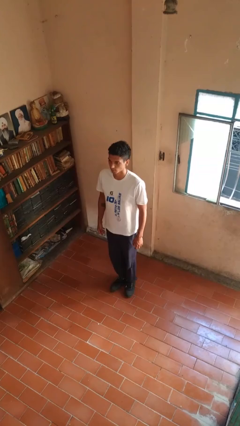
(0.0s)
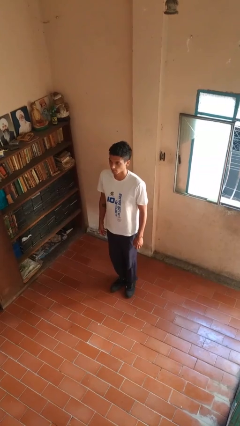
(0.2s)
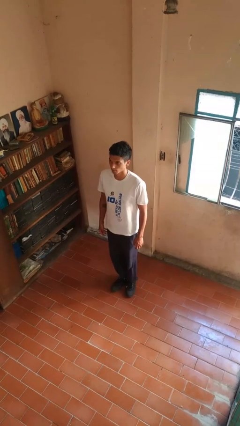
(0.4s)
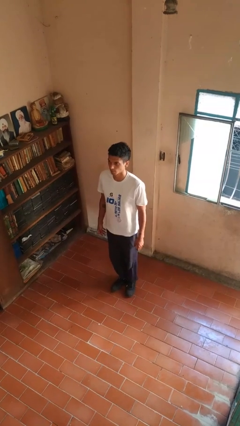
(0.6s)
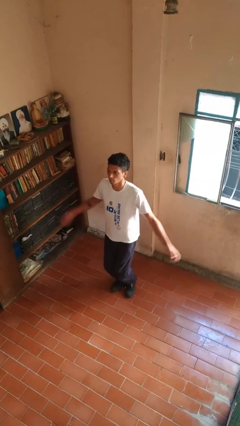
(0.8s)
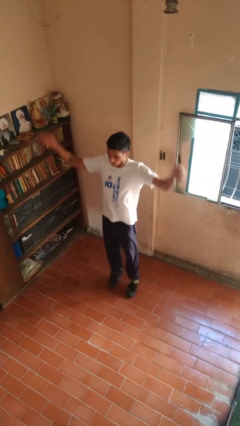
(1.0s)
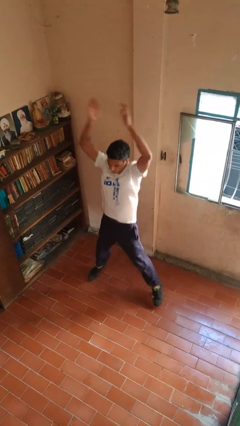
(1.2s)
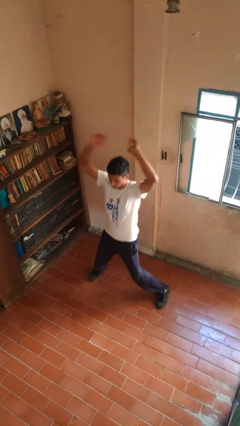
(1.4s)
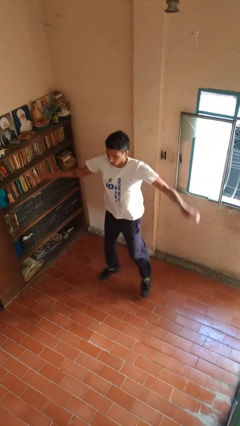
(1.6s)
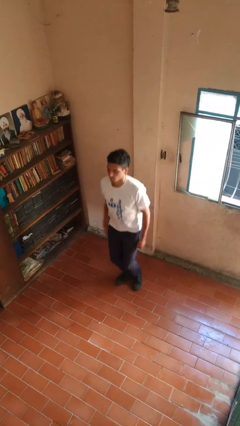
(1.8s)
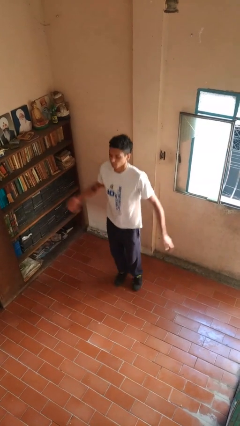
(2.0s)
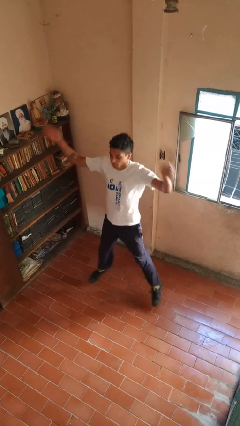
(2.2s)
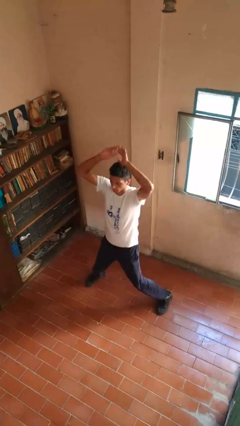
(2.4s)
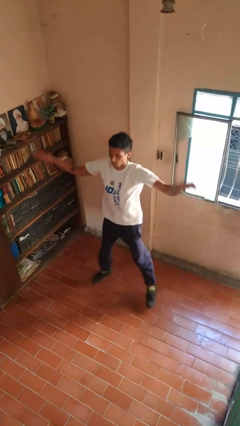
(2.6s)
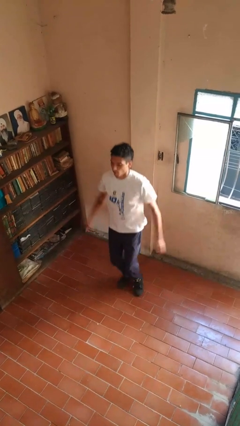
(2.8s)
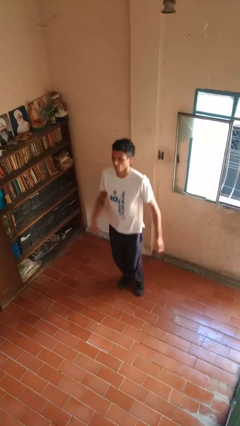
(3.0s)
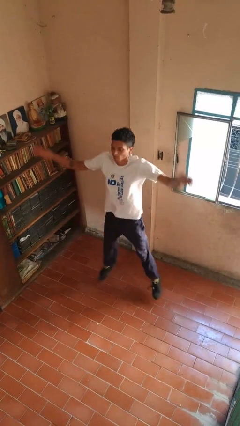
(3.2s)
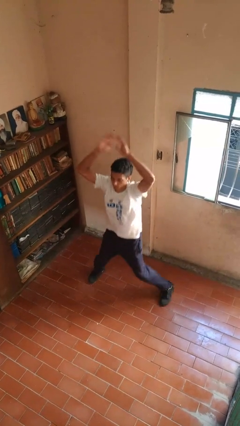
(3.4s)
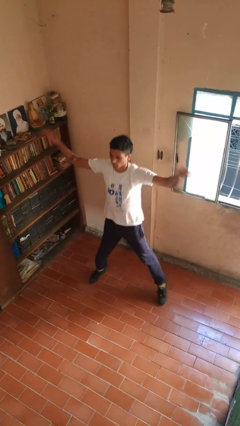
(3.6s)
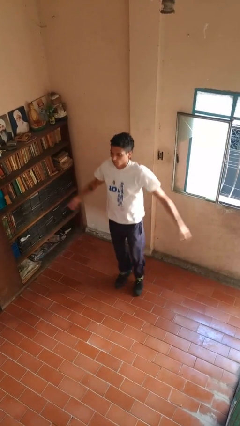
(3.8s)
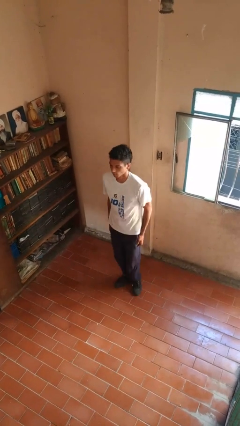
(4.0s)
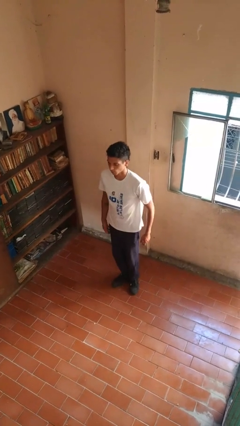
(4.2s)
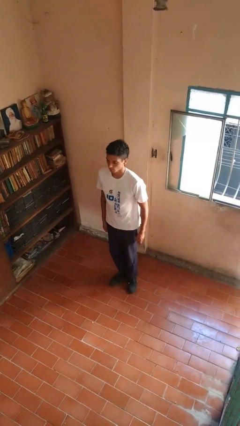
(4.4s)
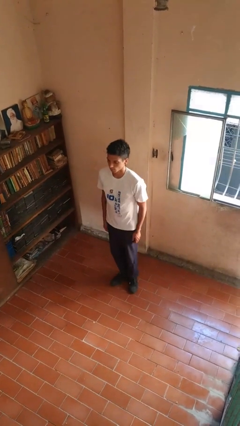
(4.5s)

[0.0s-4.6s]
person exercises with jumping jacks

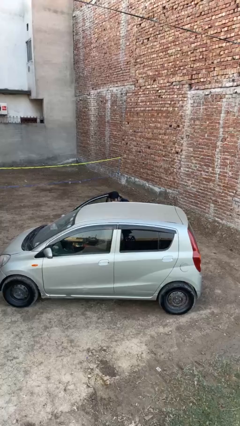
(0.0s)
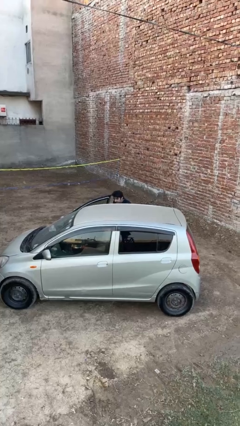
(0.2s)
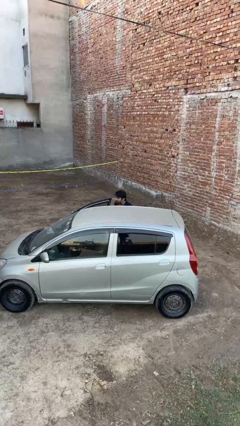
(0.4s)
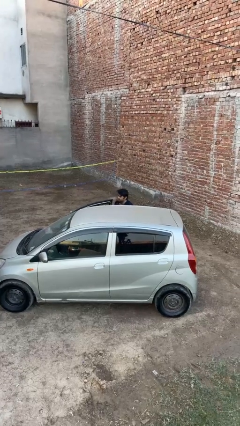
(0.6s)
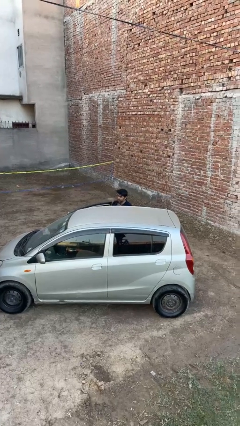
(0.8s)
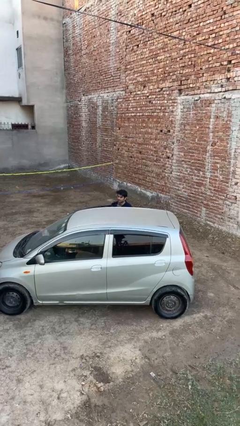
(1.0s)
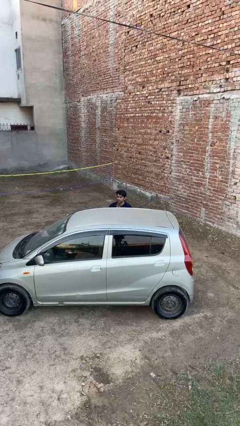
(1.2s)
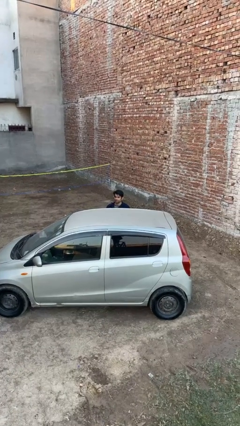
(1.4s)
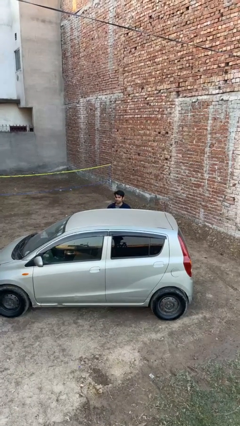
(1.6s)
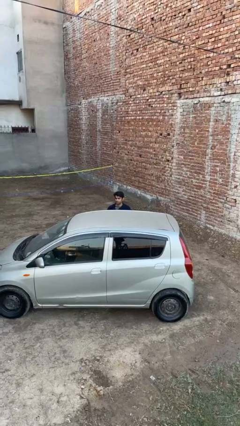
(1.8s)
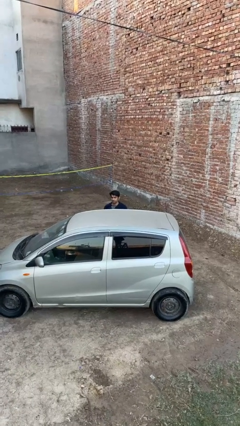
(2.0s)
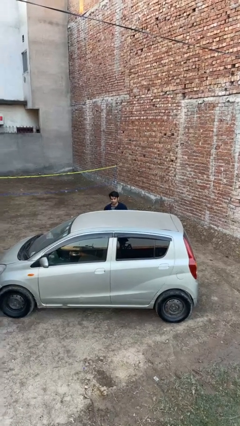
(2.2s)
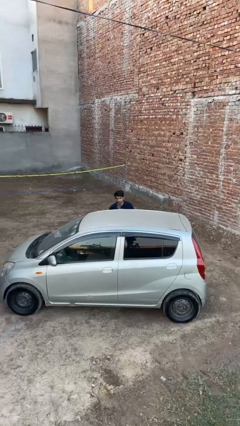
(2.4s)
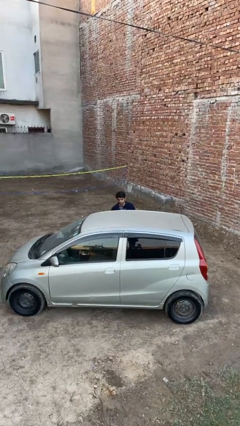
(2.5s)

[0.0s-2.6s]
person closes car door

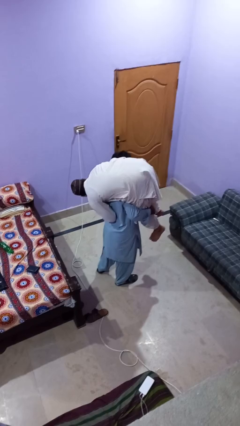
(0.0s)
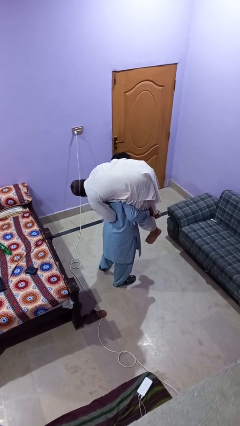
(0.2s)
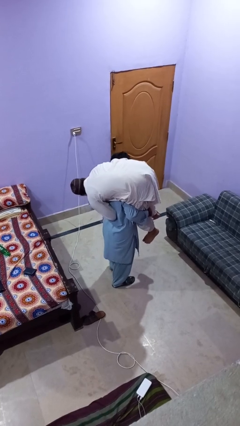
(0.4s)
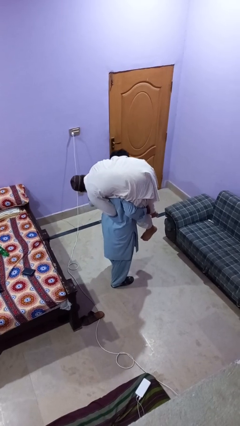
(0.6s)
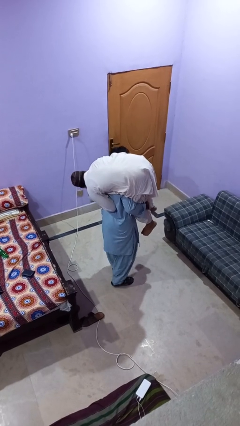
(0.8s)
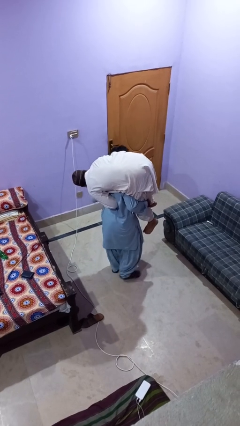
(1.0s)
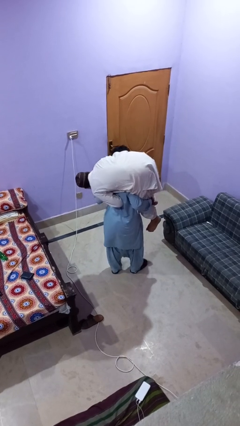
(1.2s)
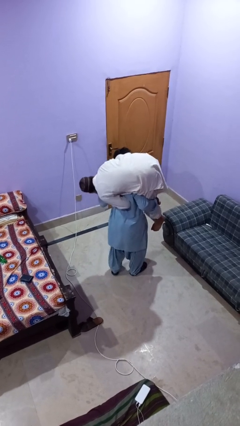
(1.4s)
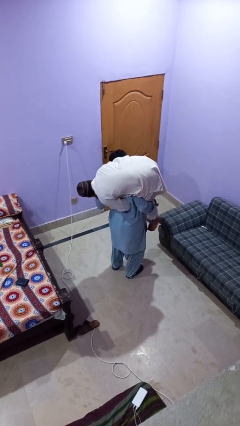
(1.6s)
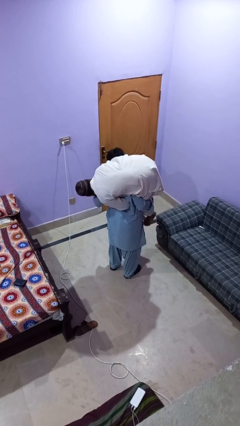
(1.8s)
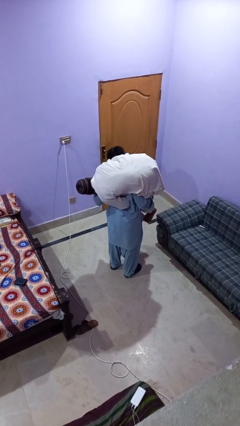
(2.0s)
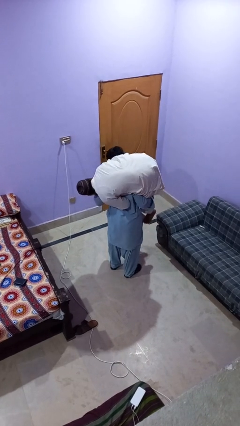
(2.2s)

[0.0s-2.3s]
person carries person on shoulders

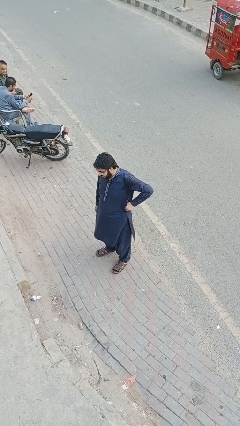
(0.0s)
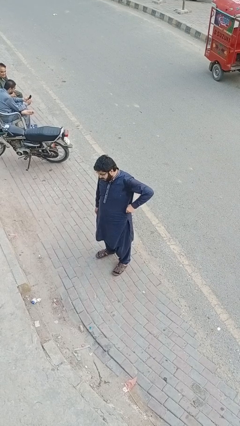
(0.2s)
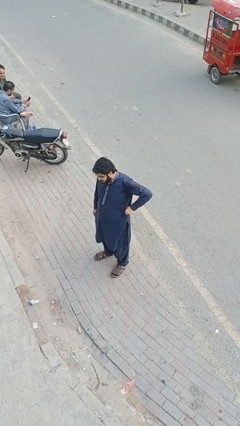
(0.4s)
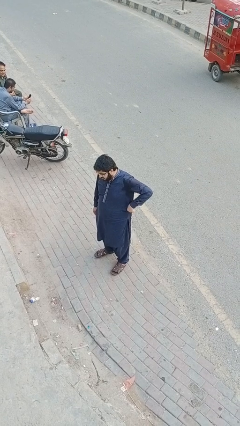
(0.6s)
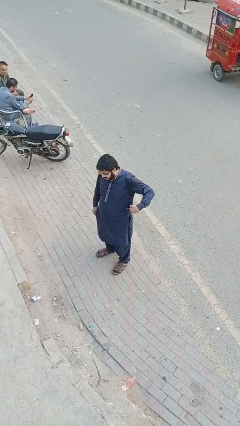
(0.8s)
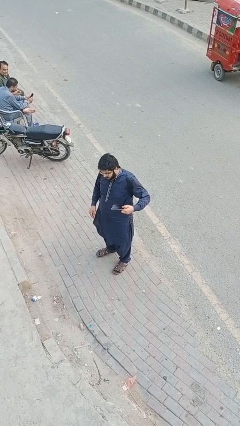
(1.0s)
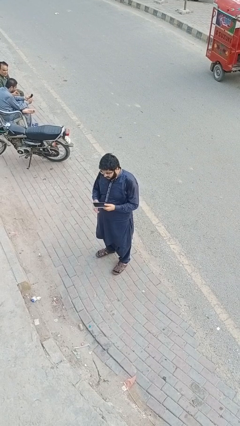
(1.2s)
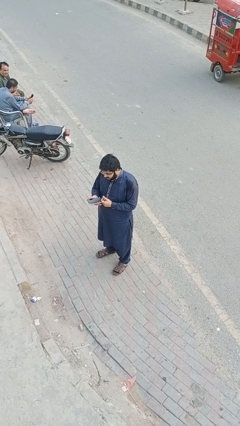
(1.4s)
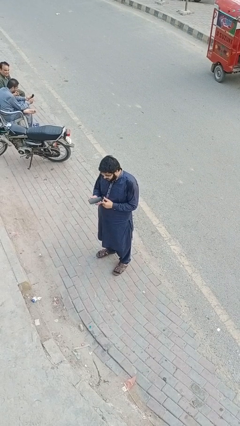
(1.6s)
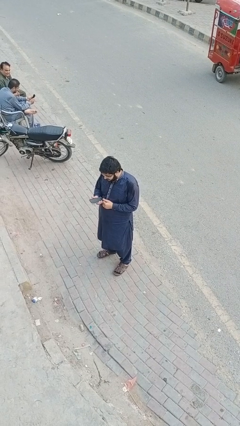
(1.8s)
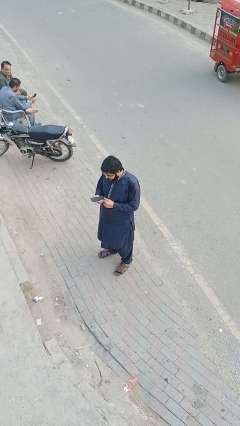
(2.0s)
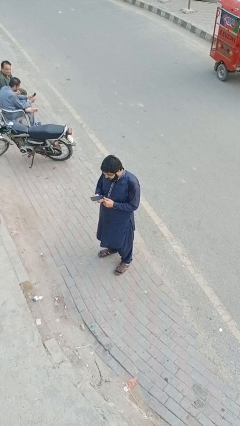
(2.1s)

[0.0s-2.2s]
person takes phone from pocket

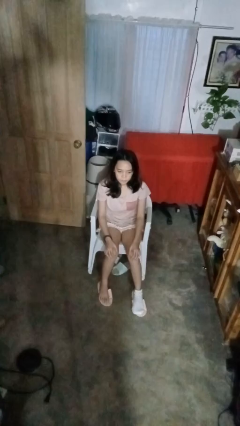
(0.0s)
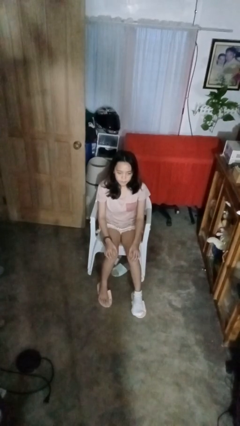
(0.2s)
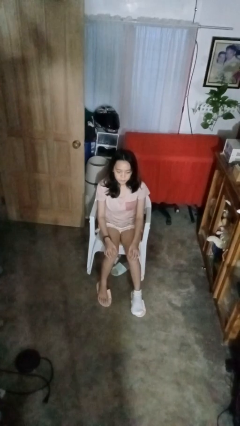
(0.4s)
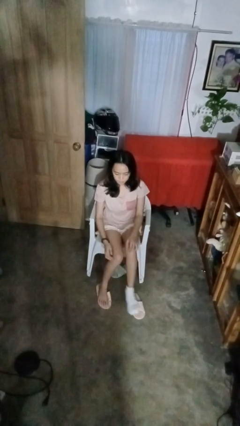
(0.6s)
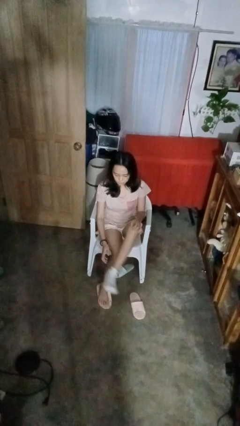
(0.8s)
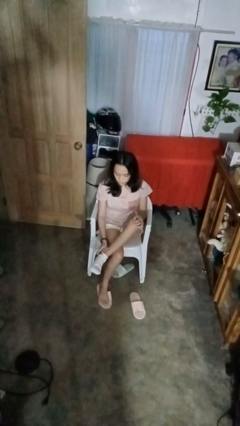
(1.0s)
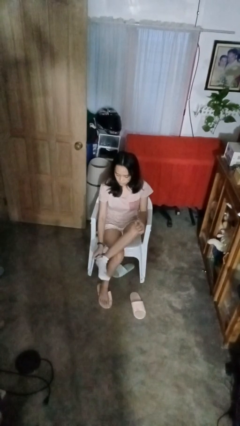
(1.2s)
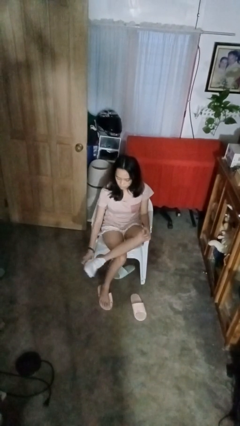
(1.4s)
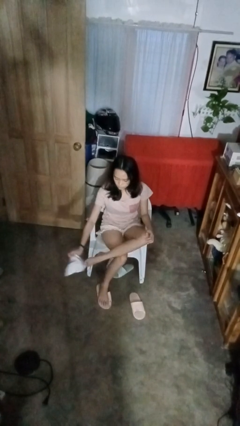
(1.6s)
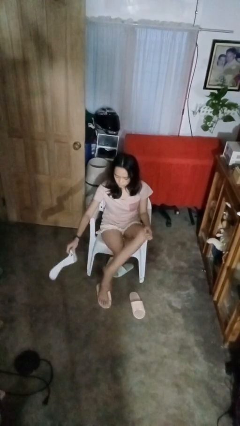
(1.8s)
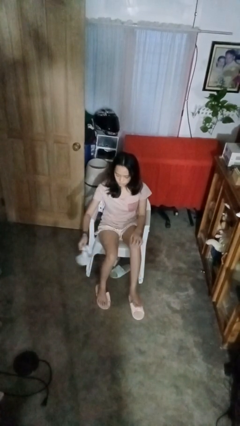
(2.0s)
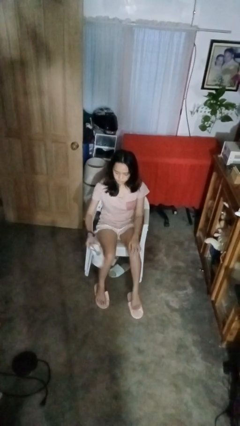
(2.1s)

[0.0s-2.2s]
person takes off socks

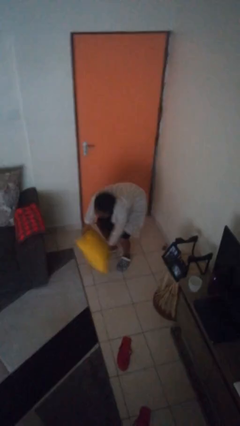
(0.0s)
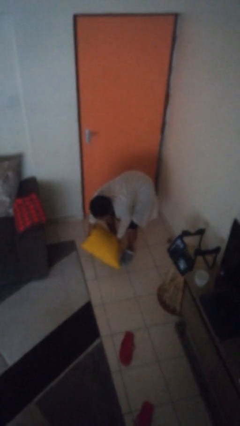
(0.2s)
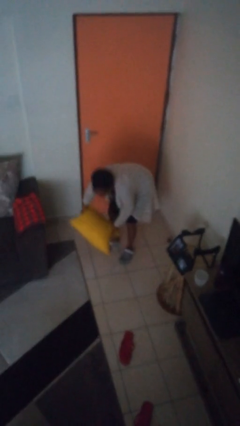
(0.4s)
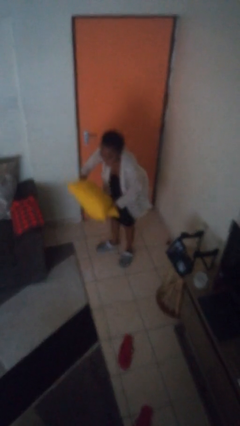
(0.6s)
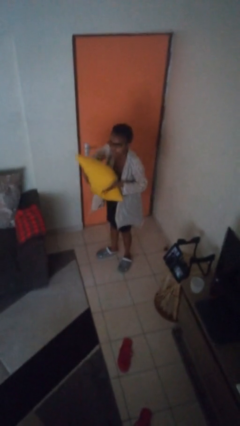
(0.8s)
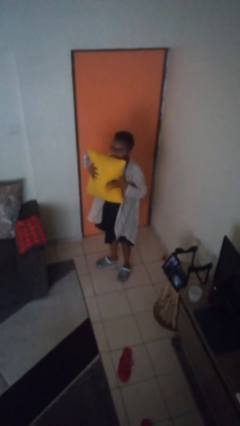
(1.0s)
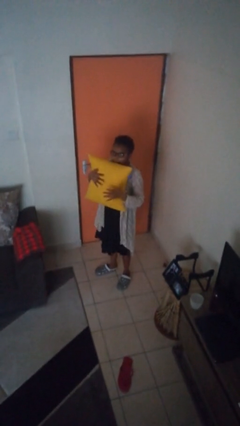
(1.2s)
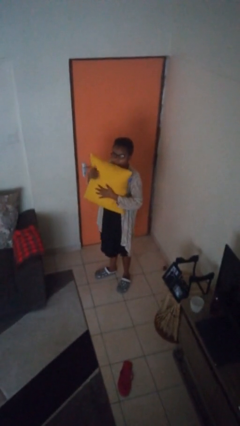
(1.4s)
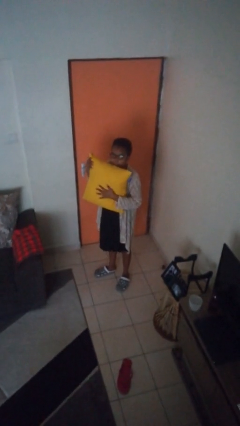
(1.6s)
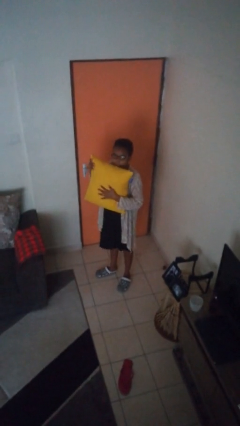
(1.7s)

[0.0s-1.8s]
person catches dropped object

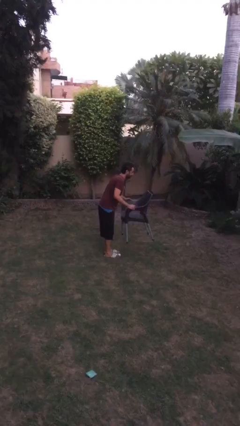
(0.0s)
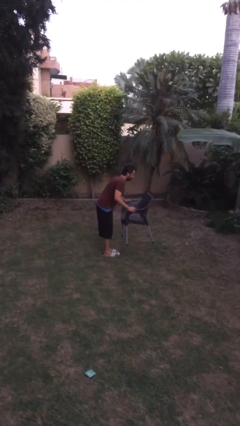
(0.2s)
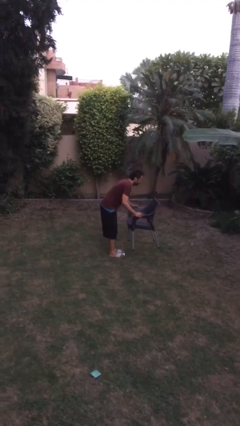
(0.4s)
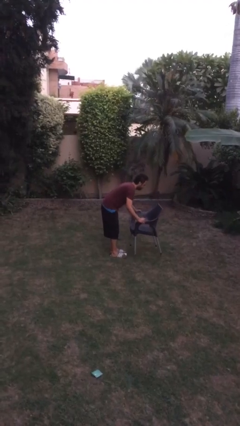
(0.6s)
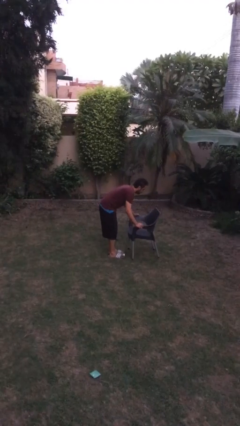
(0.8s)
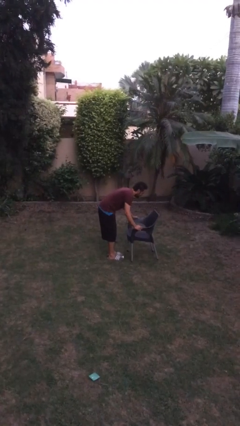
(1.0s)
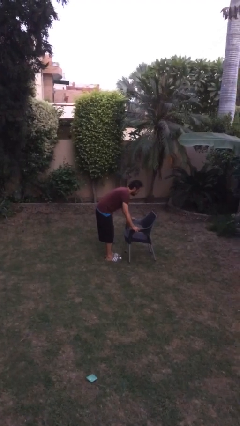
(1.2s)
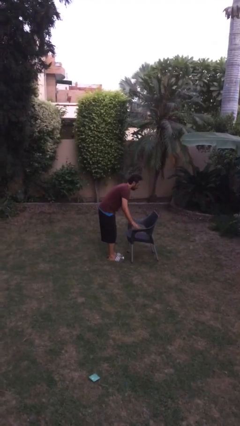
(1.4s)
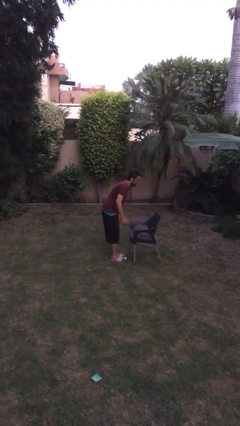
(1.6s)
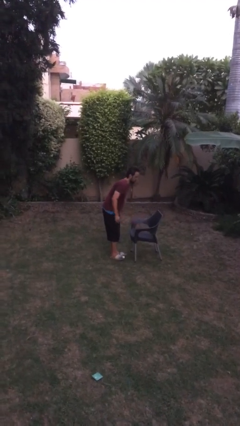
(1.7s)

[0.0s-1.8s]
person puts down object on floor
